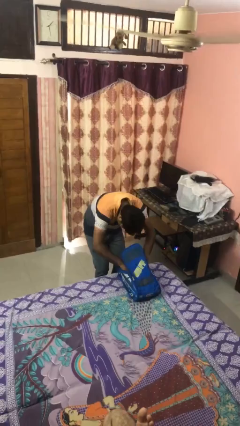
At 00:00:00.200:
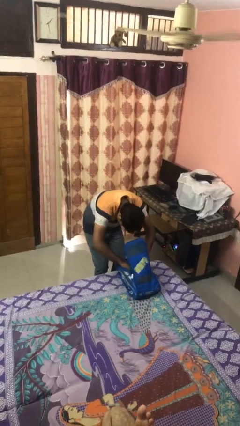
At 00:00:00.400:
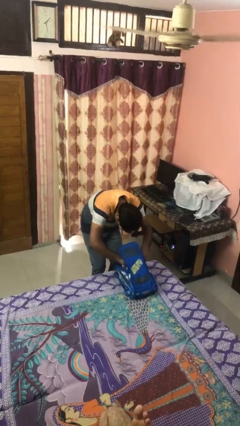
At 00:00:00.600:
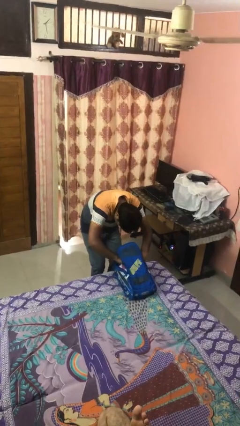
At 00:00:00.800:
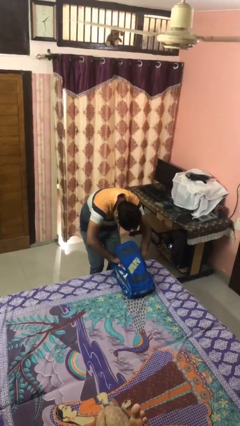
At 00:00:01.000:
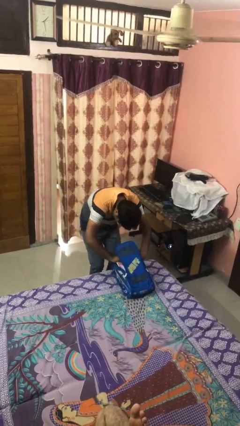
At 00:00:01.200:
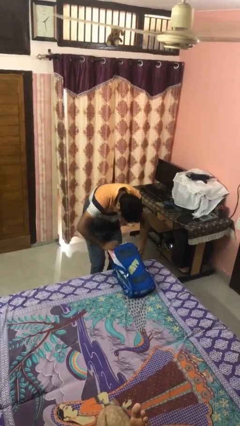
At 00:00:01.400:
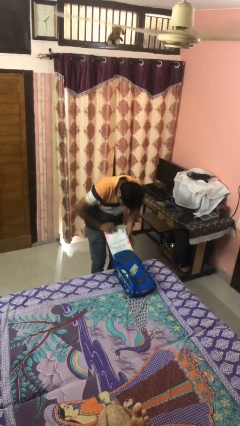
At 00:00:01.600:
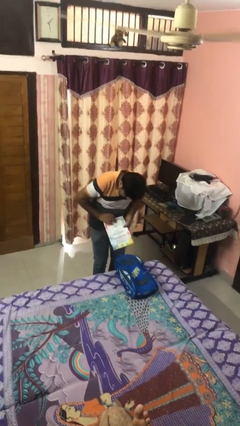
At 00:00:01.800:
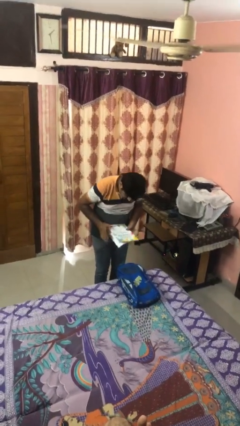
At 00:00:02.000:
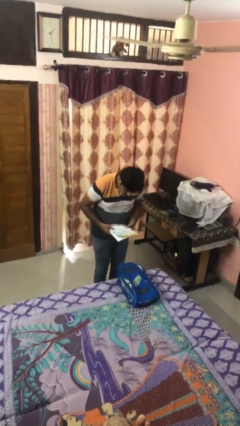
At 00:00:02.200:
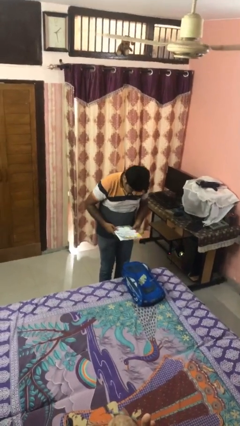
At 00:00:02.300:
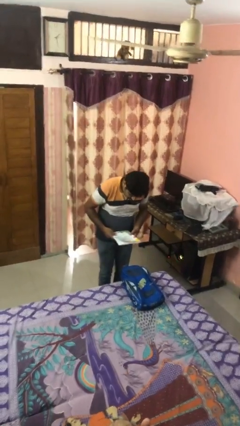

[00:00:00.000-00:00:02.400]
person takes object from backpack

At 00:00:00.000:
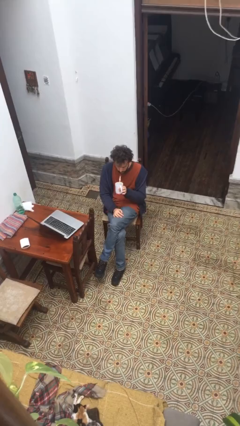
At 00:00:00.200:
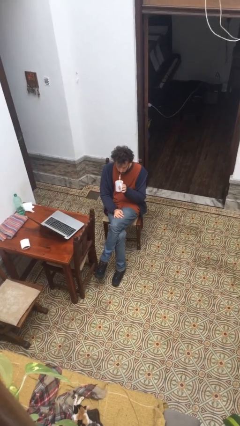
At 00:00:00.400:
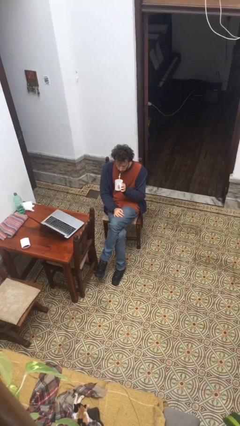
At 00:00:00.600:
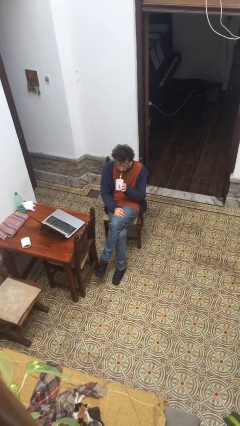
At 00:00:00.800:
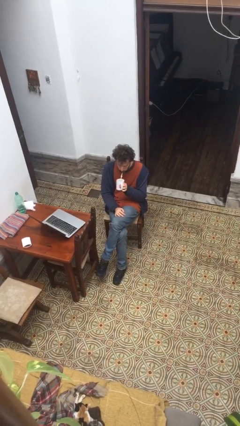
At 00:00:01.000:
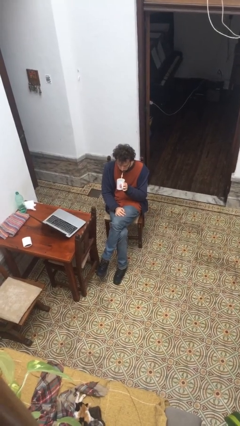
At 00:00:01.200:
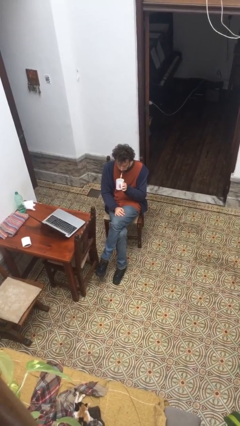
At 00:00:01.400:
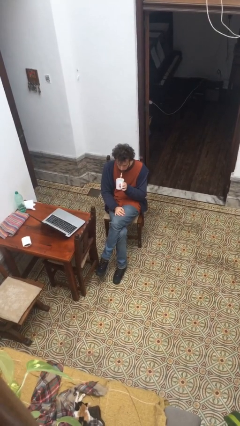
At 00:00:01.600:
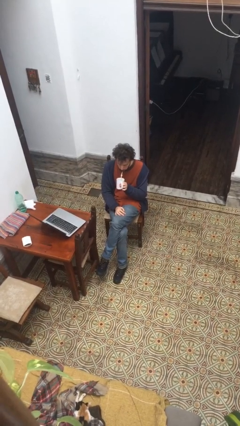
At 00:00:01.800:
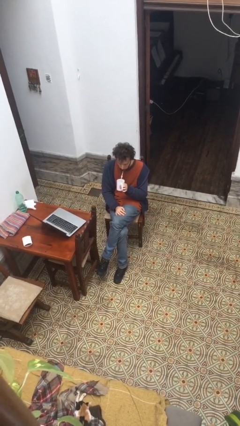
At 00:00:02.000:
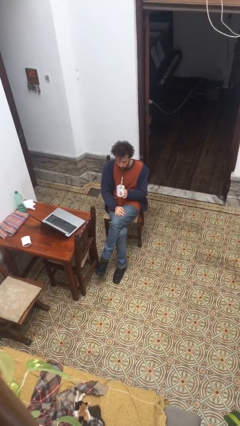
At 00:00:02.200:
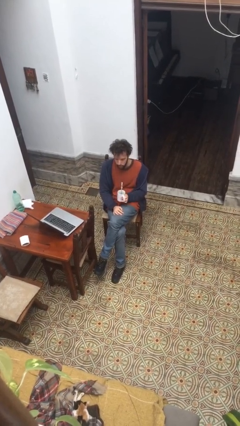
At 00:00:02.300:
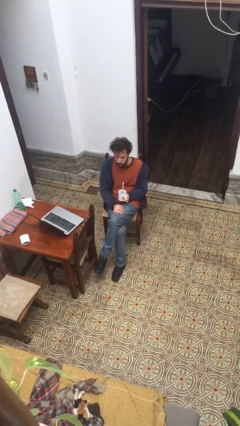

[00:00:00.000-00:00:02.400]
person drinks from straw

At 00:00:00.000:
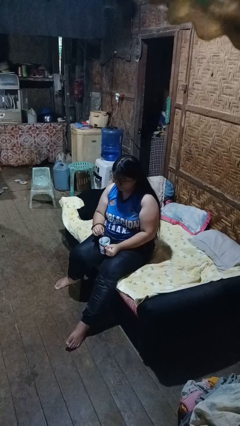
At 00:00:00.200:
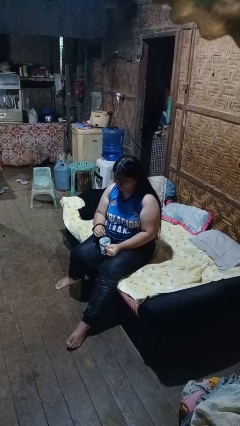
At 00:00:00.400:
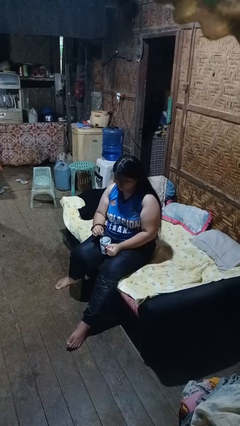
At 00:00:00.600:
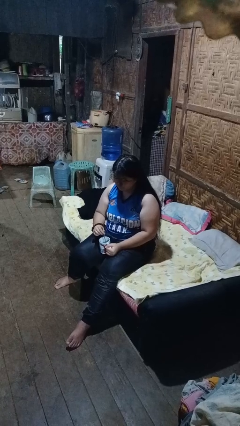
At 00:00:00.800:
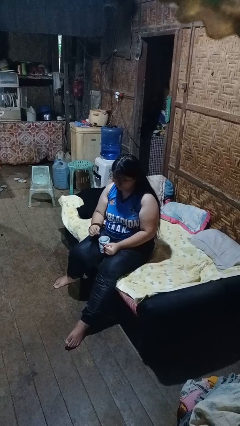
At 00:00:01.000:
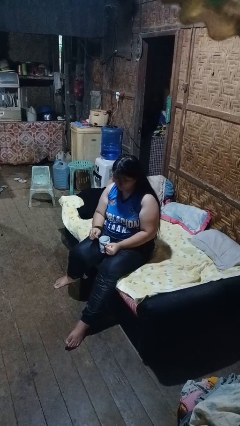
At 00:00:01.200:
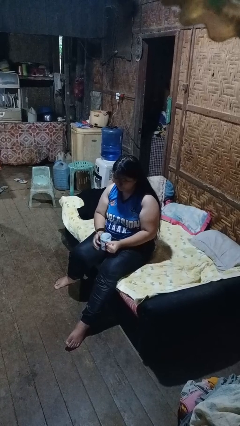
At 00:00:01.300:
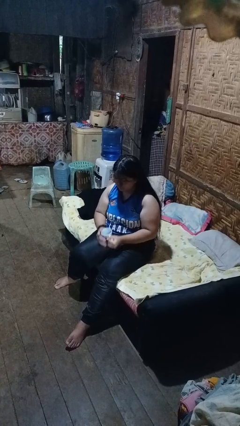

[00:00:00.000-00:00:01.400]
person stirs mug

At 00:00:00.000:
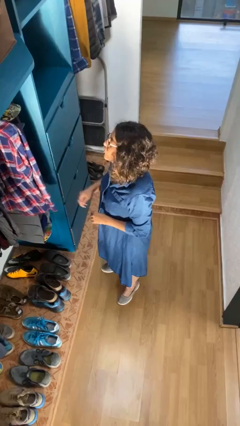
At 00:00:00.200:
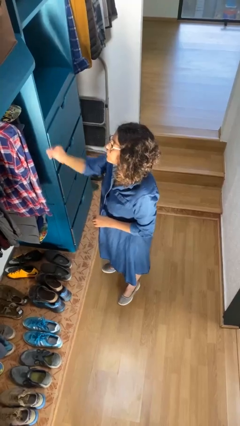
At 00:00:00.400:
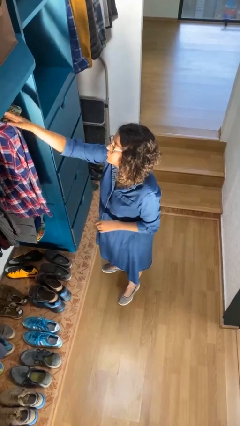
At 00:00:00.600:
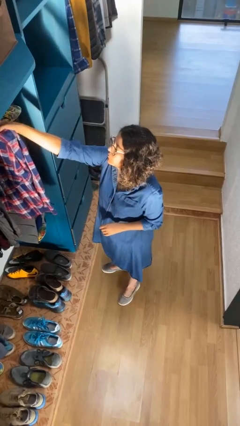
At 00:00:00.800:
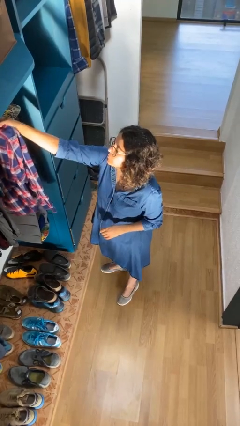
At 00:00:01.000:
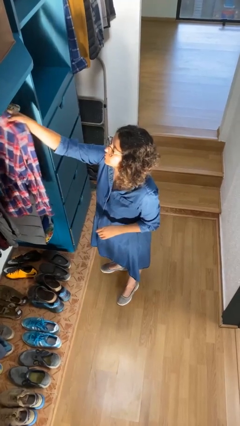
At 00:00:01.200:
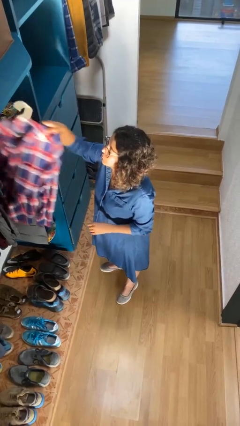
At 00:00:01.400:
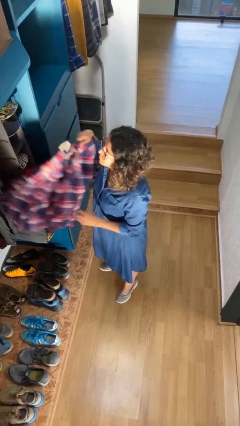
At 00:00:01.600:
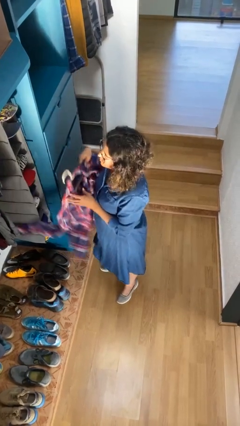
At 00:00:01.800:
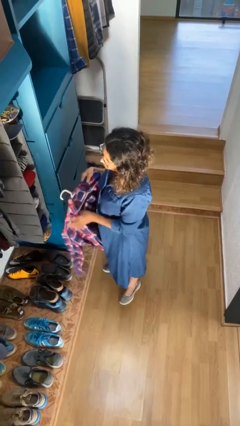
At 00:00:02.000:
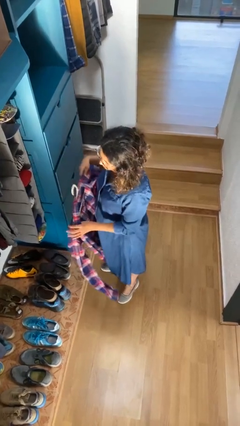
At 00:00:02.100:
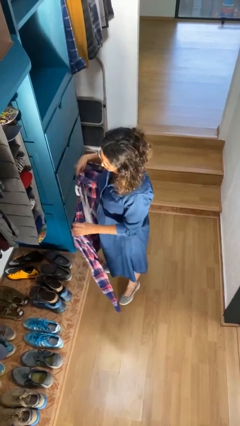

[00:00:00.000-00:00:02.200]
person takes clothes from closet

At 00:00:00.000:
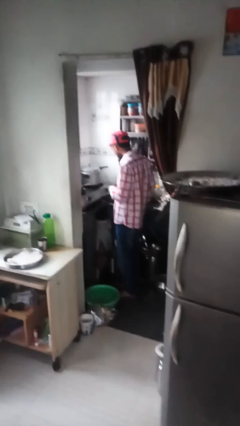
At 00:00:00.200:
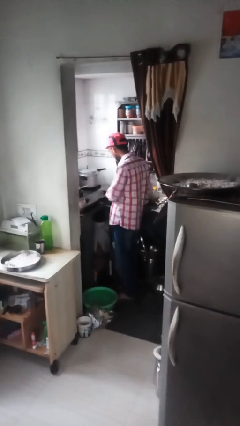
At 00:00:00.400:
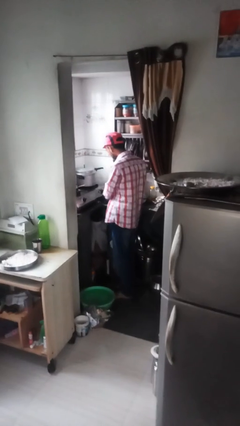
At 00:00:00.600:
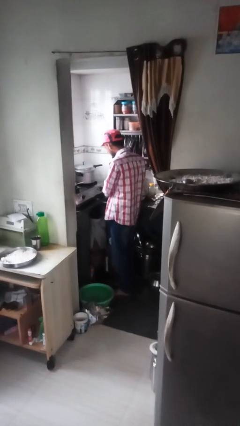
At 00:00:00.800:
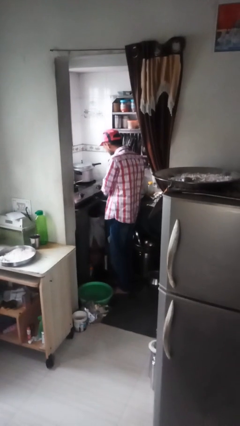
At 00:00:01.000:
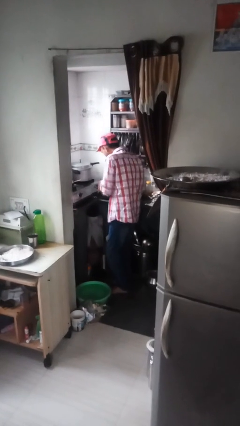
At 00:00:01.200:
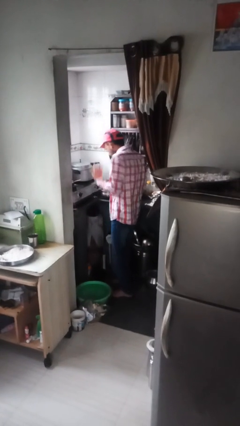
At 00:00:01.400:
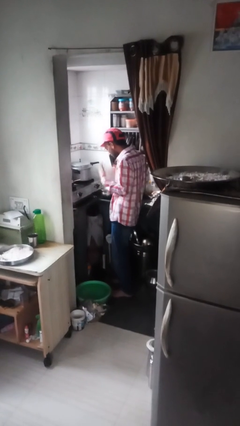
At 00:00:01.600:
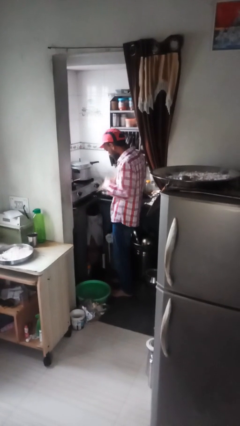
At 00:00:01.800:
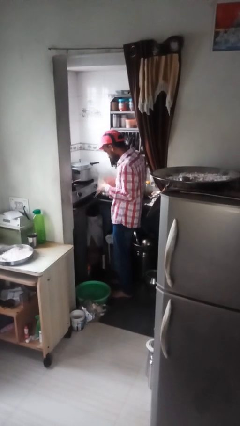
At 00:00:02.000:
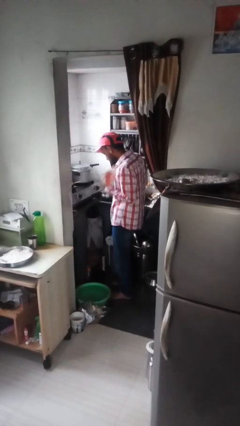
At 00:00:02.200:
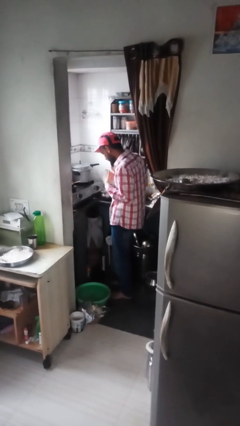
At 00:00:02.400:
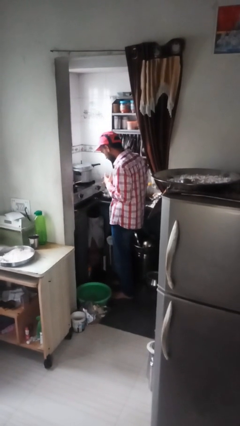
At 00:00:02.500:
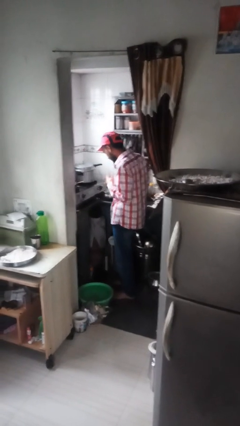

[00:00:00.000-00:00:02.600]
person burns hand

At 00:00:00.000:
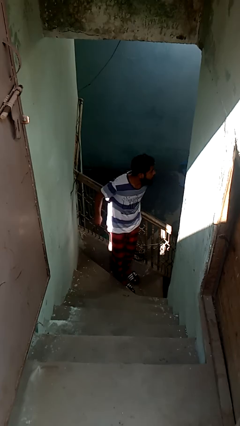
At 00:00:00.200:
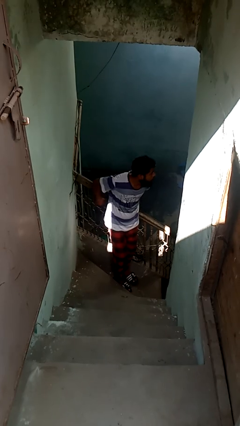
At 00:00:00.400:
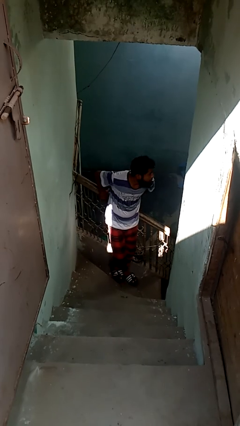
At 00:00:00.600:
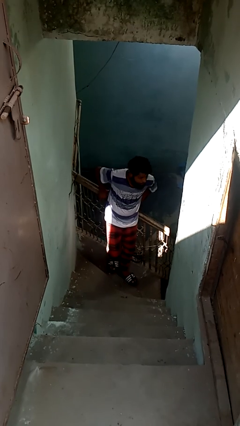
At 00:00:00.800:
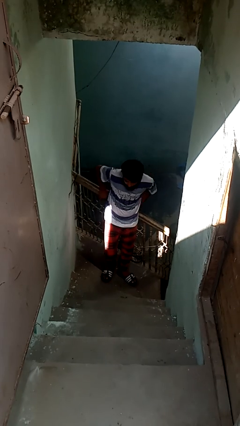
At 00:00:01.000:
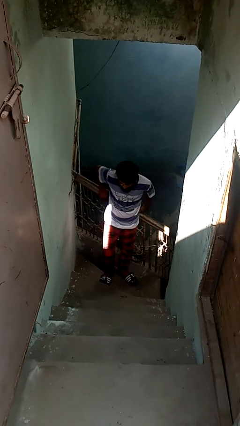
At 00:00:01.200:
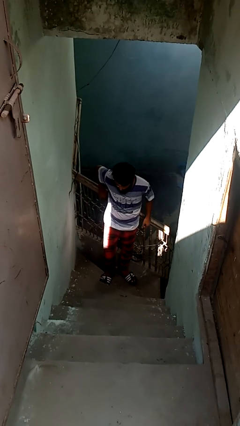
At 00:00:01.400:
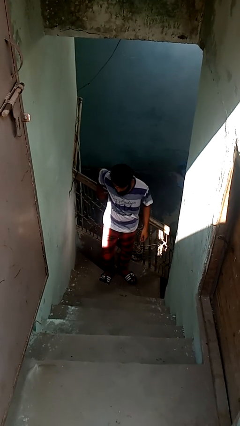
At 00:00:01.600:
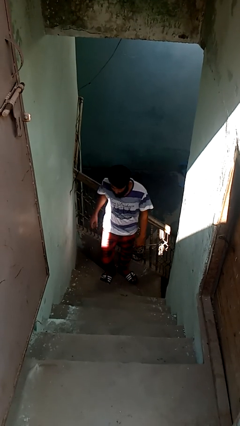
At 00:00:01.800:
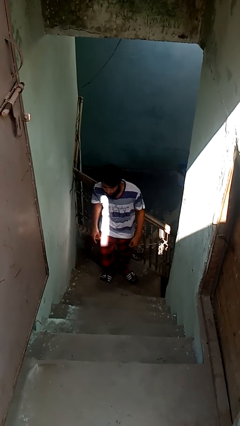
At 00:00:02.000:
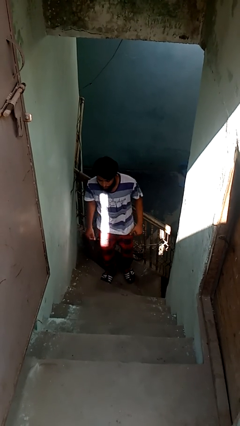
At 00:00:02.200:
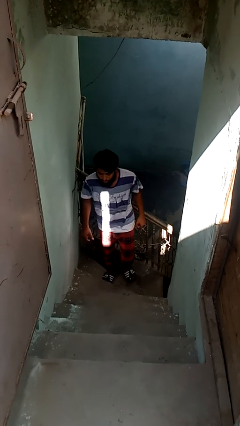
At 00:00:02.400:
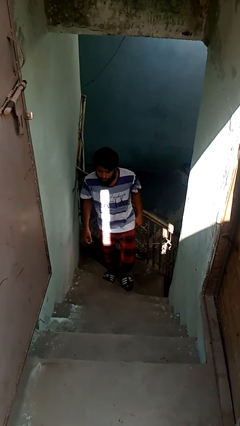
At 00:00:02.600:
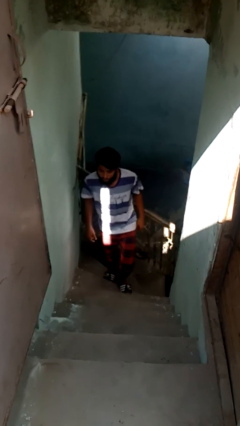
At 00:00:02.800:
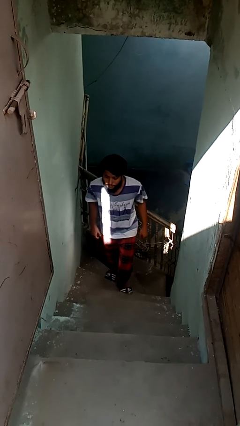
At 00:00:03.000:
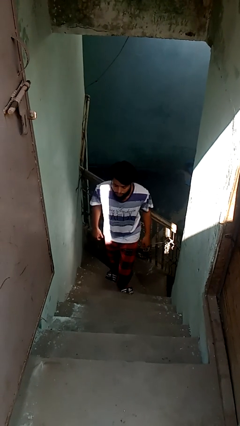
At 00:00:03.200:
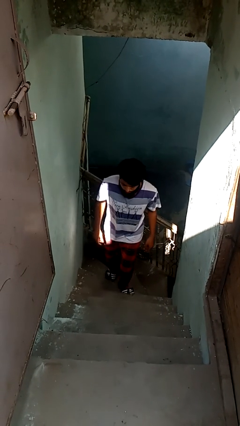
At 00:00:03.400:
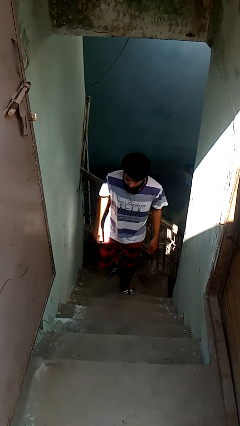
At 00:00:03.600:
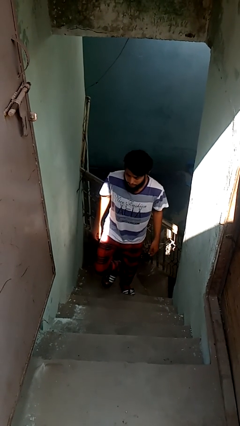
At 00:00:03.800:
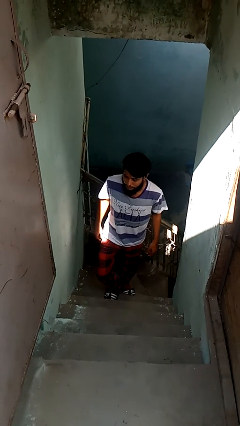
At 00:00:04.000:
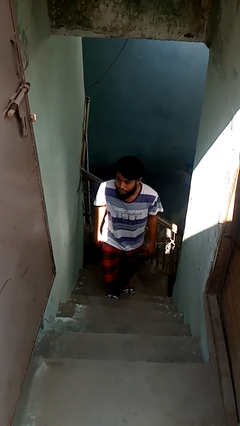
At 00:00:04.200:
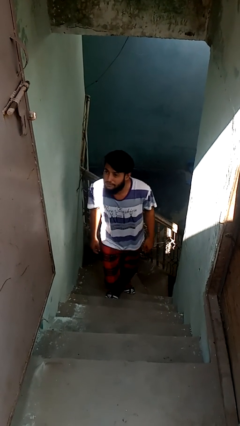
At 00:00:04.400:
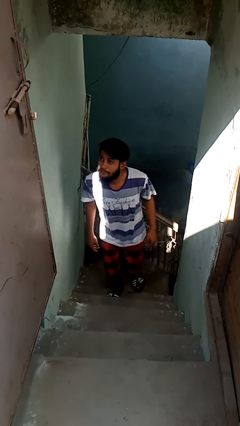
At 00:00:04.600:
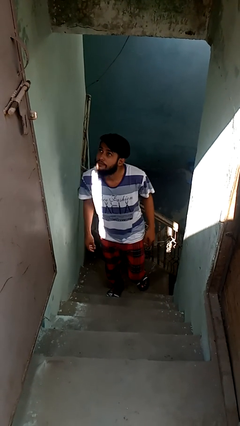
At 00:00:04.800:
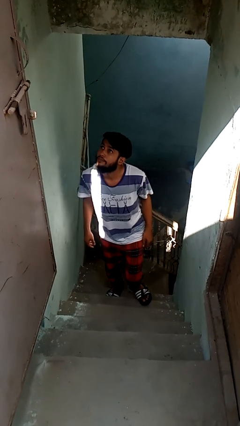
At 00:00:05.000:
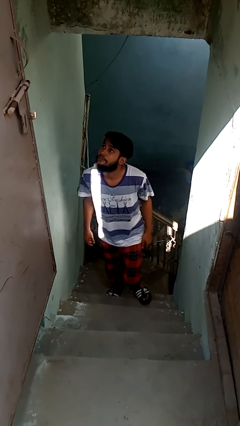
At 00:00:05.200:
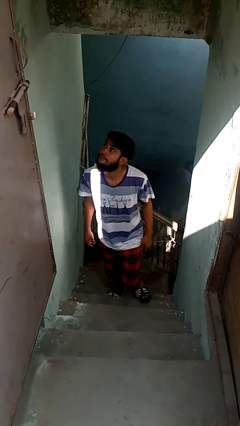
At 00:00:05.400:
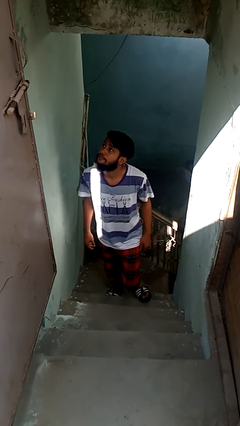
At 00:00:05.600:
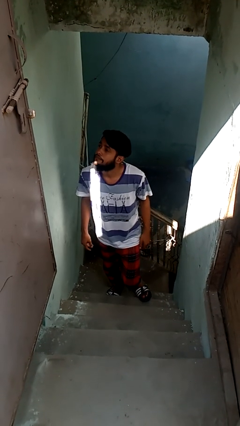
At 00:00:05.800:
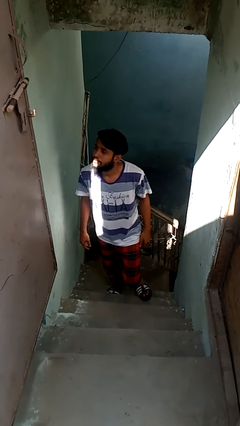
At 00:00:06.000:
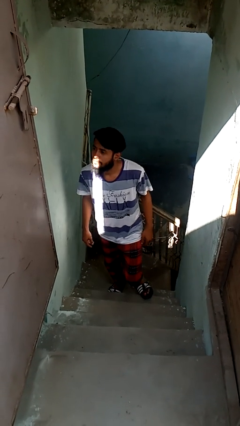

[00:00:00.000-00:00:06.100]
person climbs up stairs
